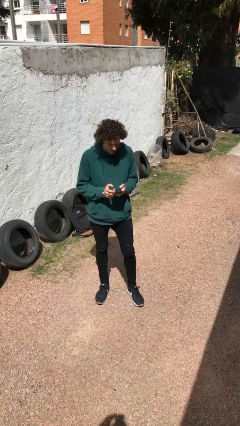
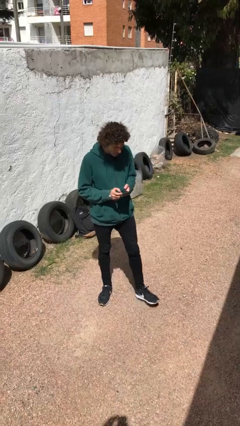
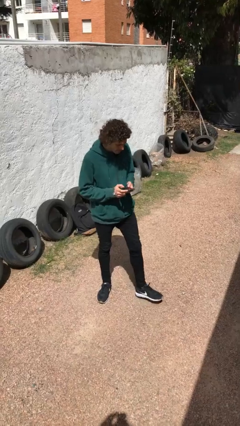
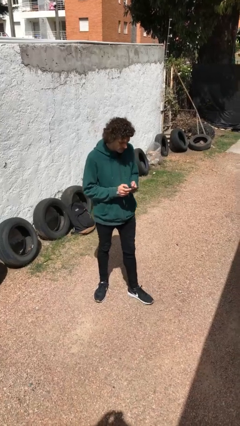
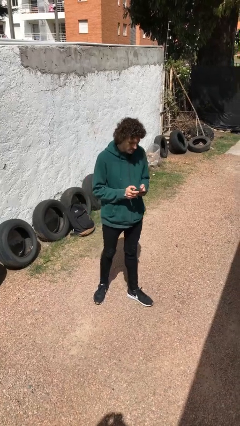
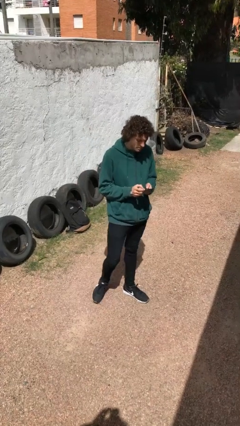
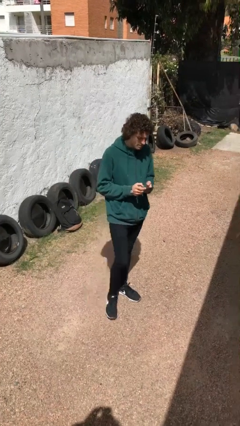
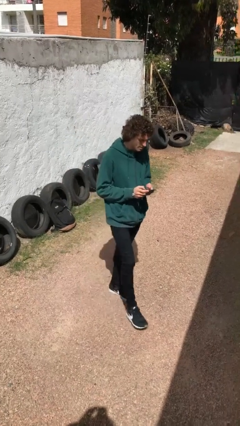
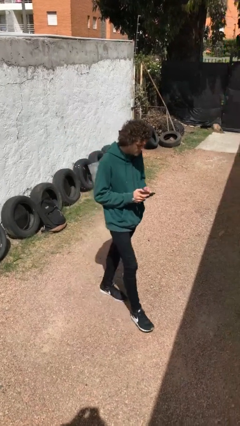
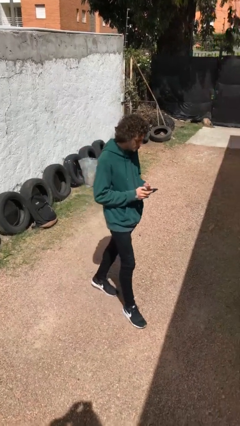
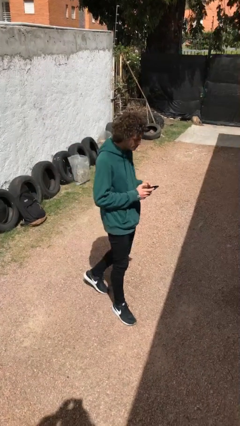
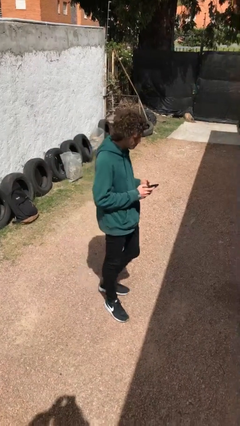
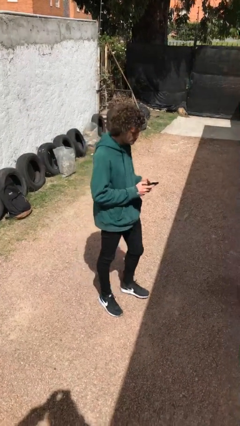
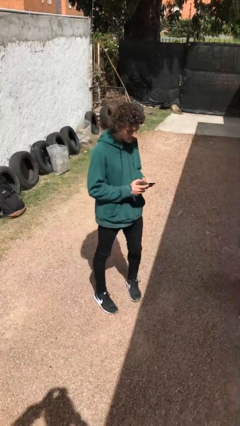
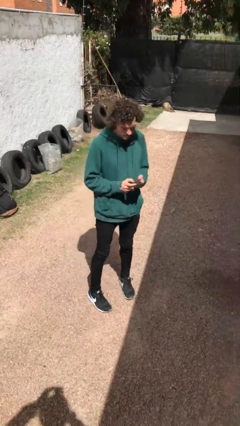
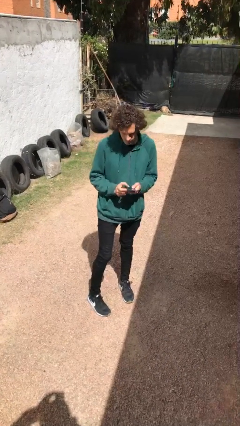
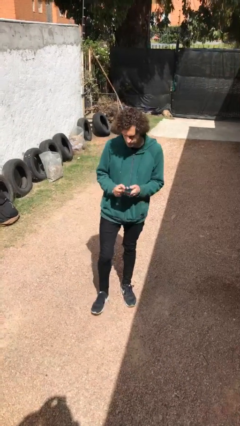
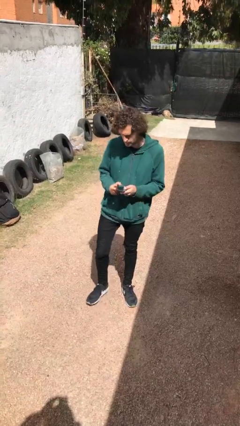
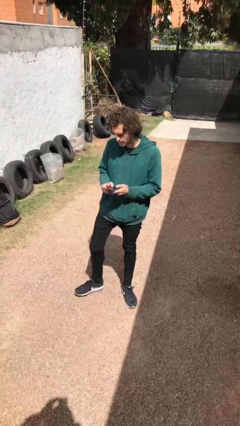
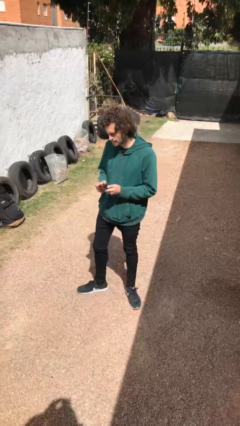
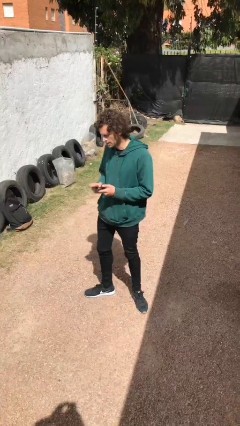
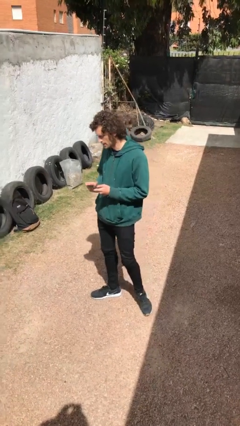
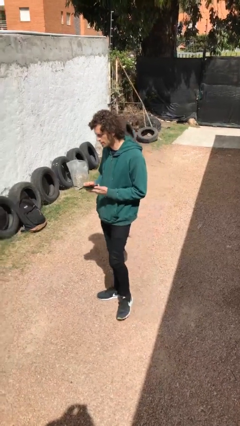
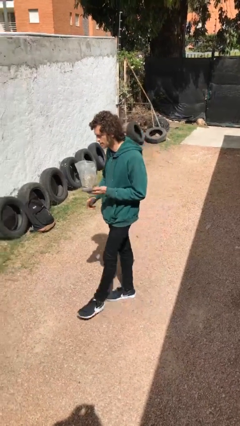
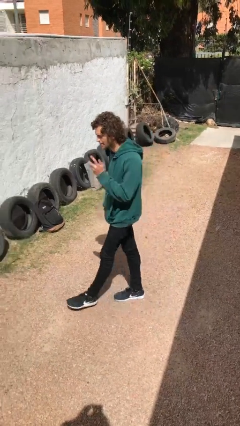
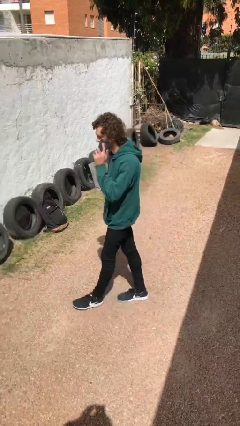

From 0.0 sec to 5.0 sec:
person texts on phone

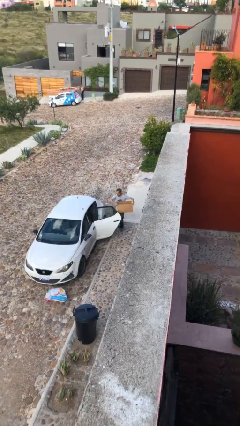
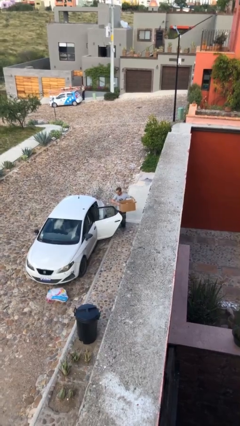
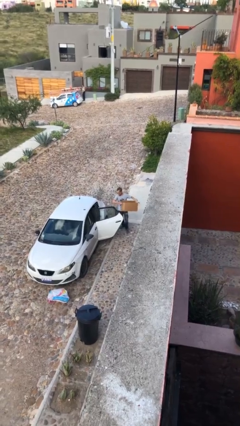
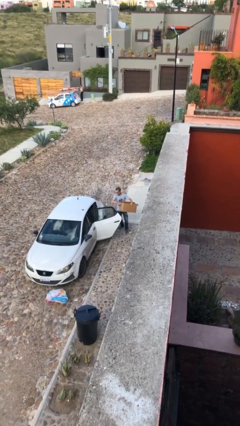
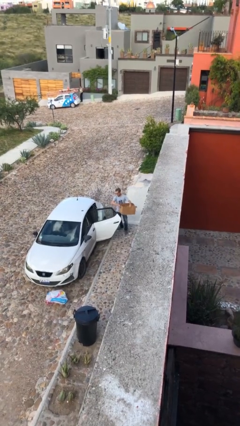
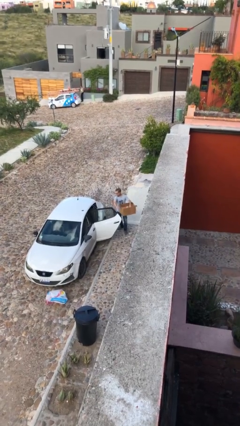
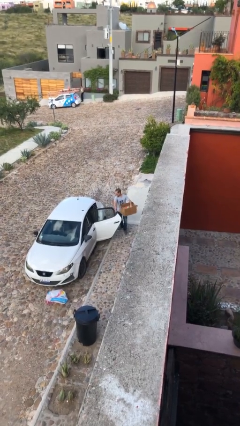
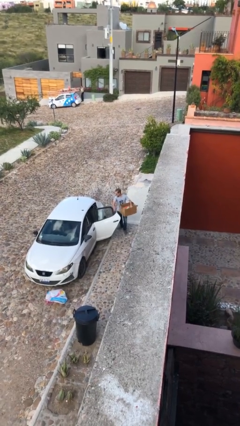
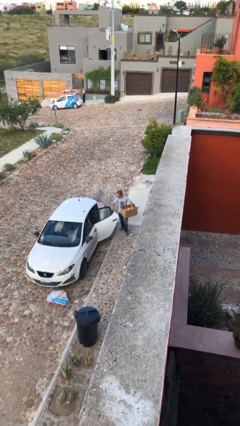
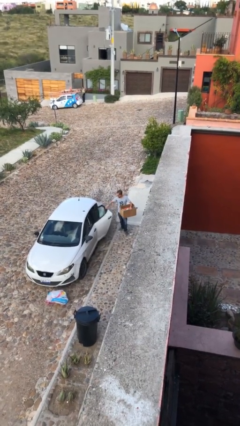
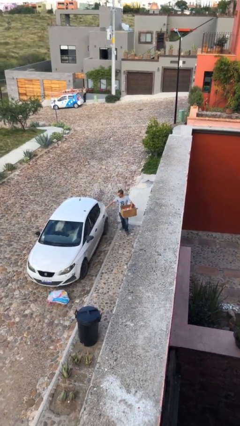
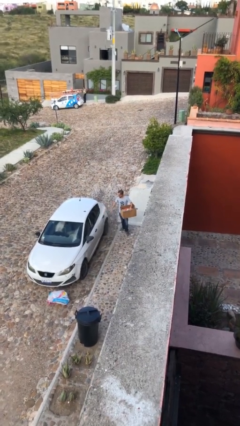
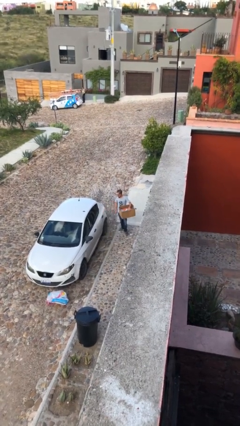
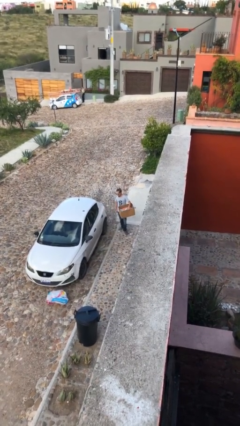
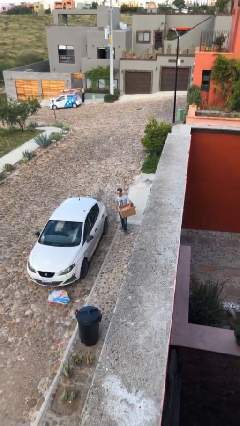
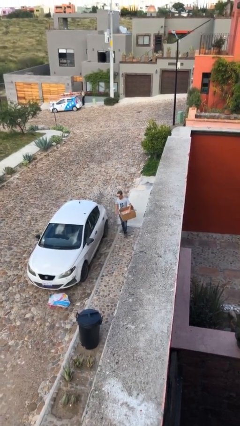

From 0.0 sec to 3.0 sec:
person closes car door

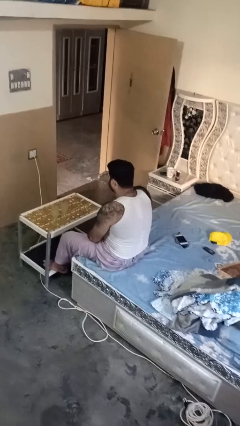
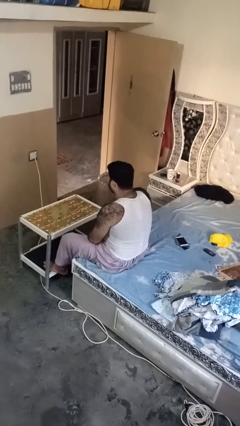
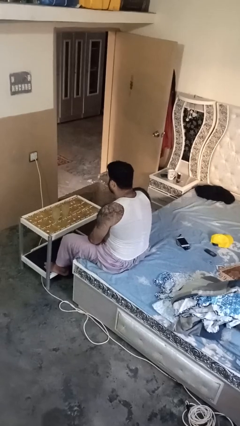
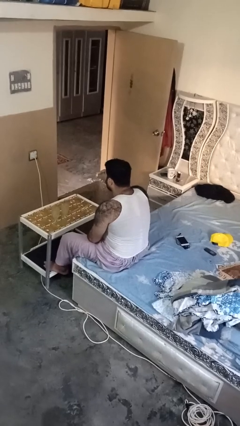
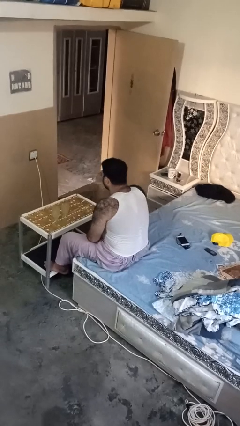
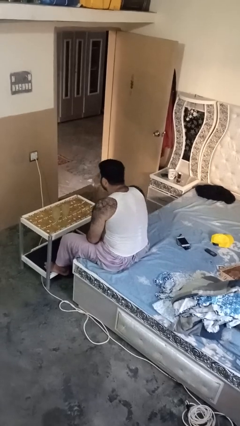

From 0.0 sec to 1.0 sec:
person puts down object on table

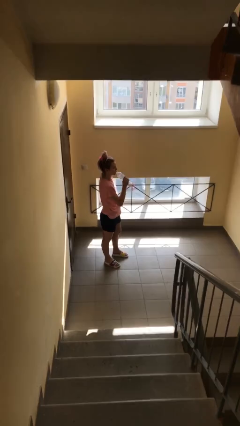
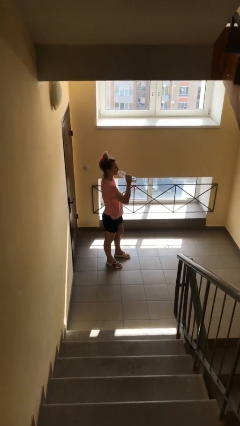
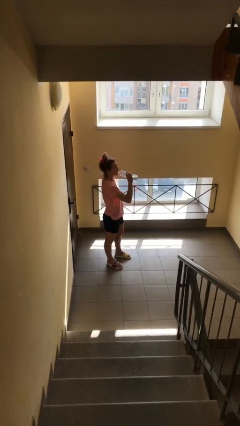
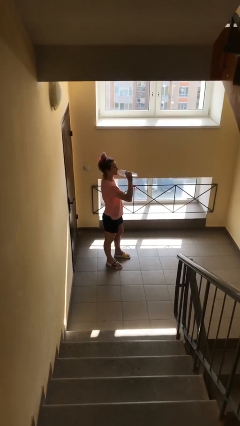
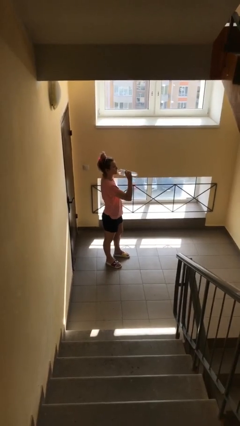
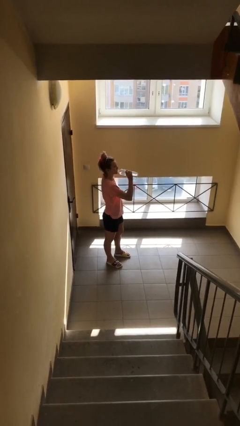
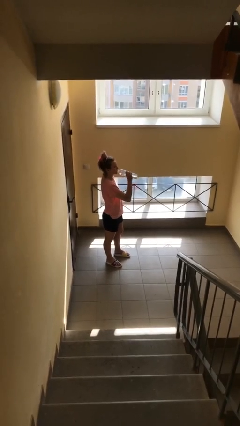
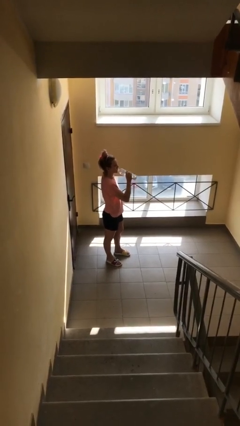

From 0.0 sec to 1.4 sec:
person drinks from bottle

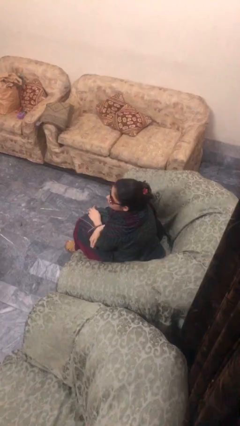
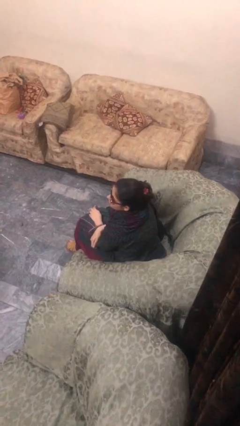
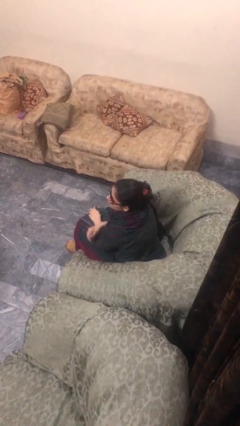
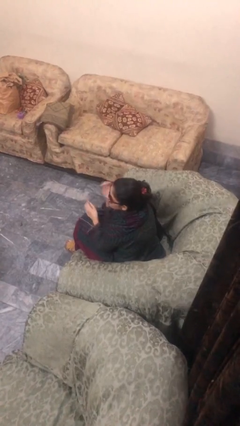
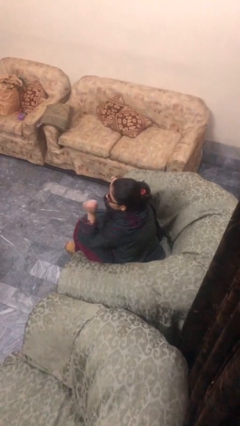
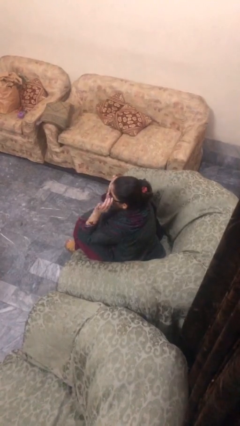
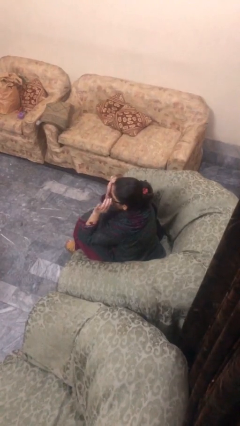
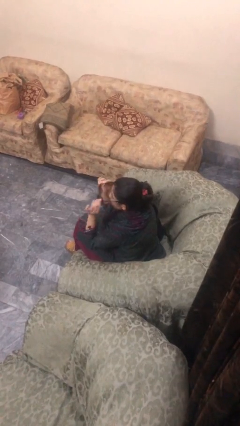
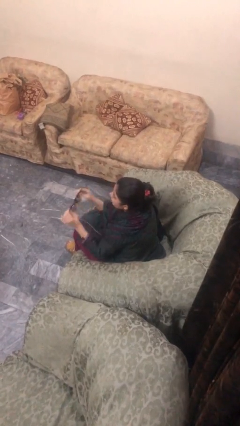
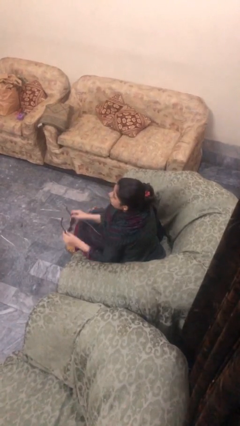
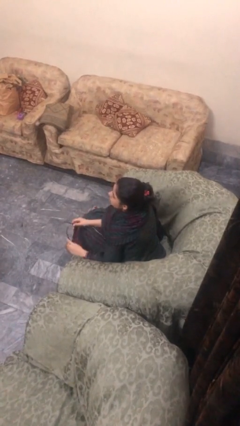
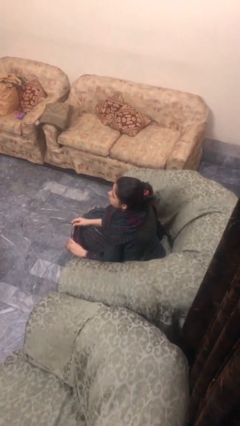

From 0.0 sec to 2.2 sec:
person takes off sunglasses

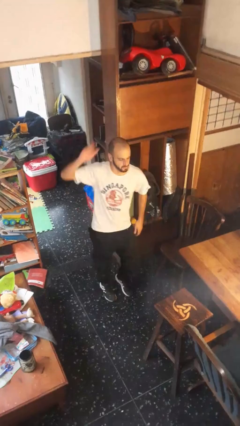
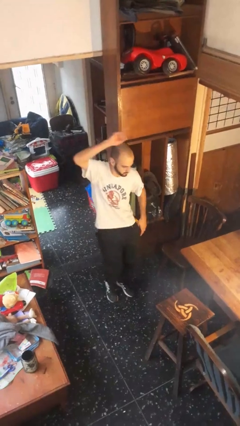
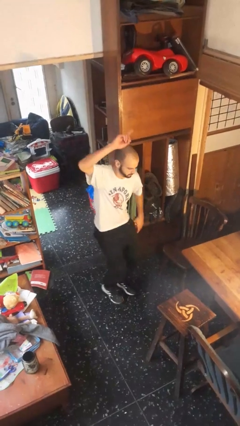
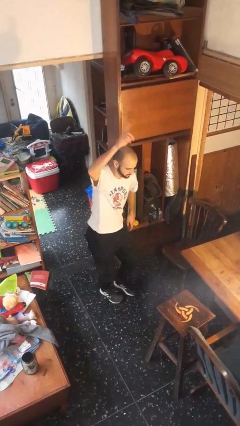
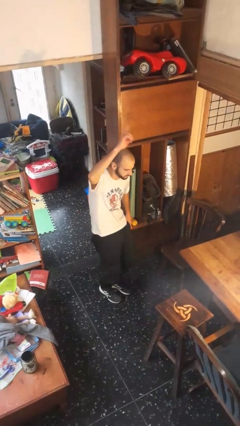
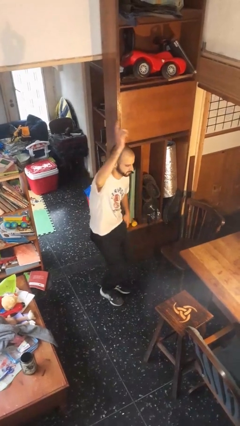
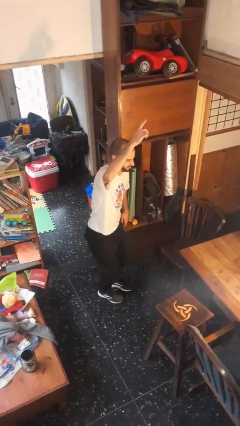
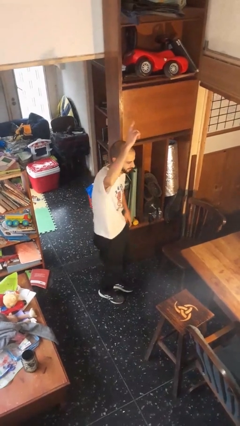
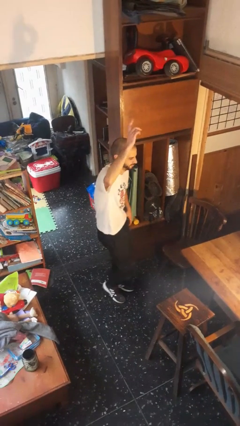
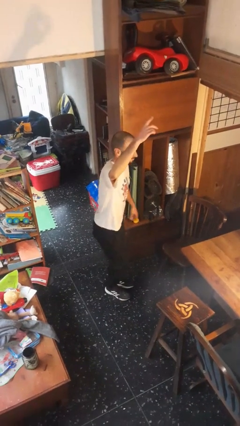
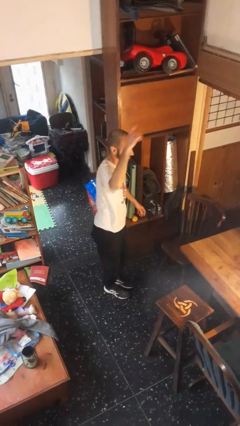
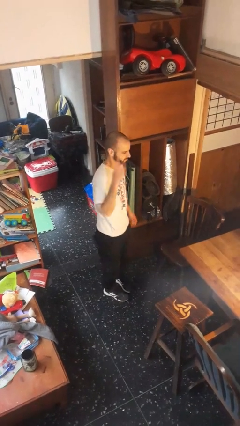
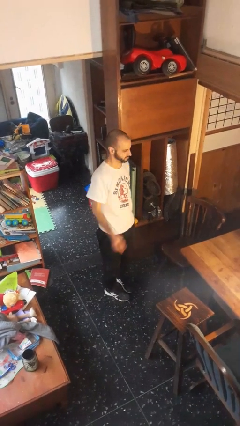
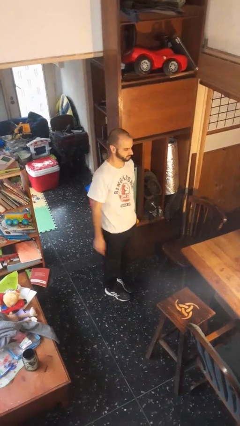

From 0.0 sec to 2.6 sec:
person dances in place

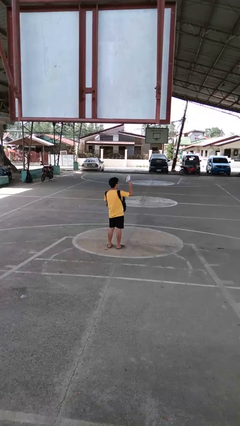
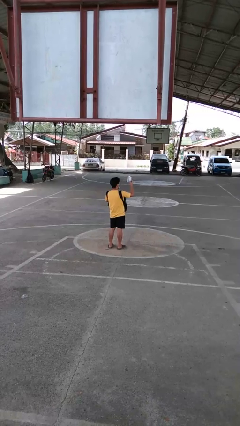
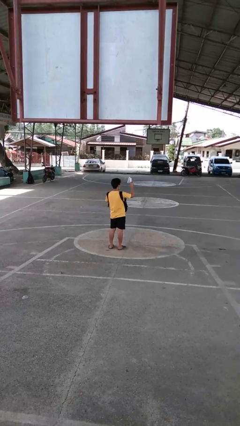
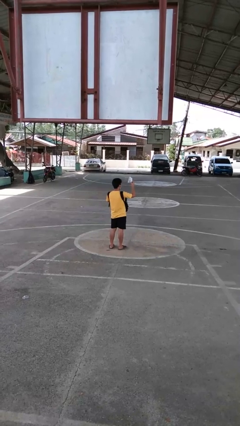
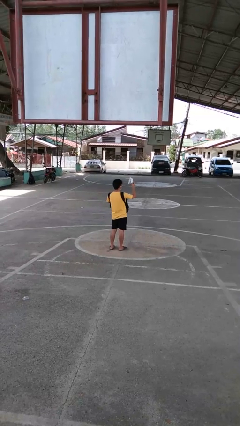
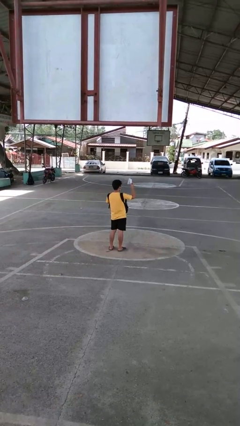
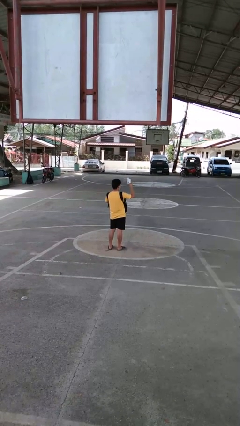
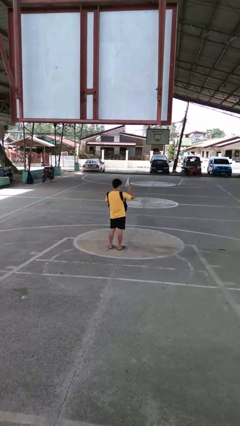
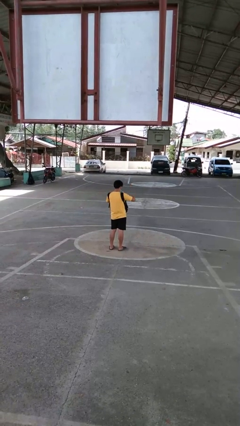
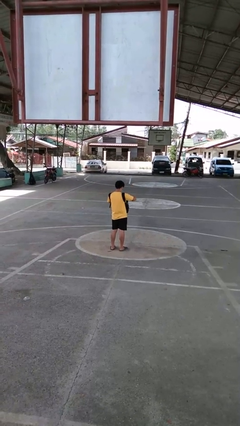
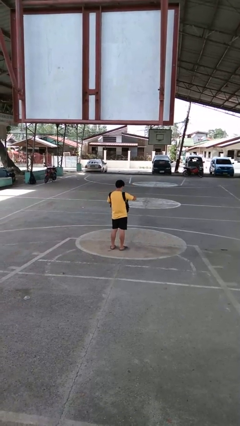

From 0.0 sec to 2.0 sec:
person takes object from purse
